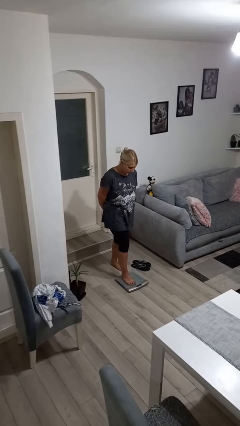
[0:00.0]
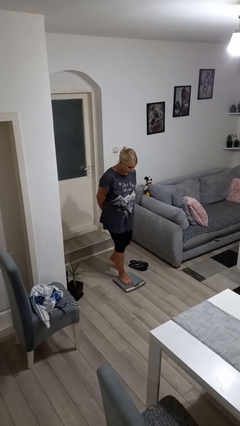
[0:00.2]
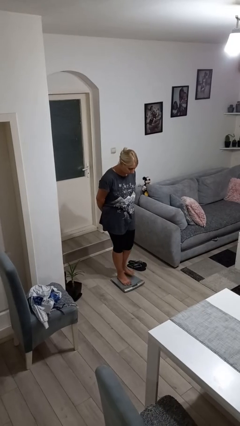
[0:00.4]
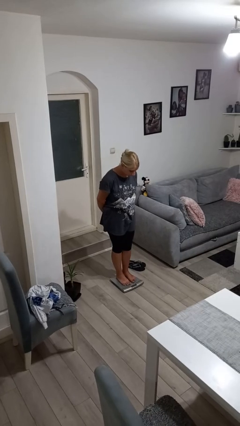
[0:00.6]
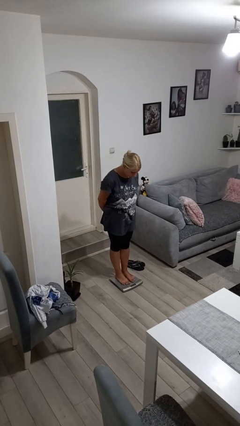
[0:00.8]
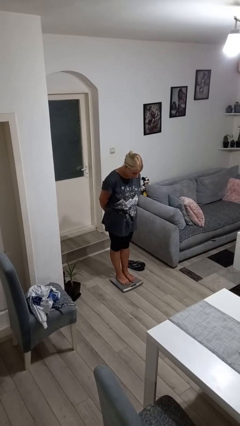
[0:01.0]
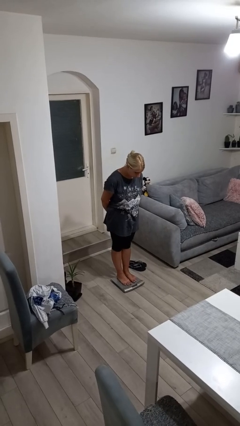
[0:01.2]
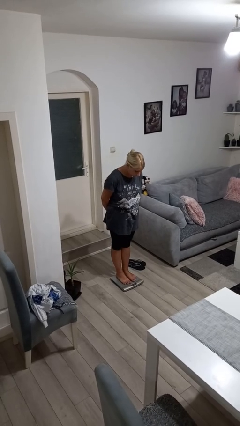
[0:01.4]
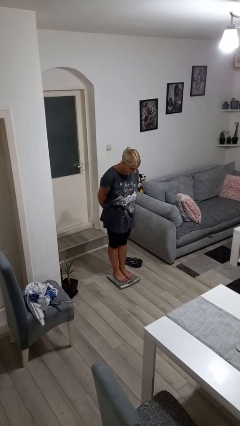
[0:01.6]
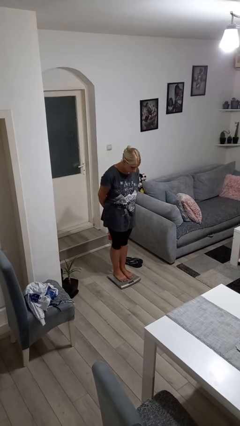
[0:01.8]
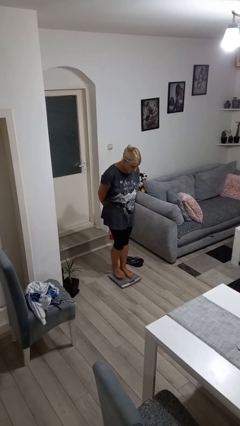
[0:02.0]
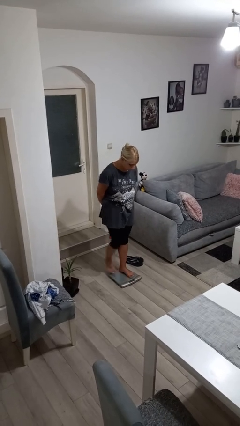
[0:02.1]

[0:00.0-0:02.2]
person uses bodyweight scale

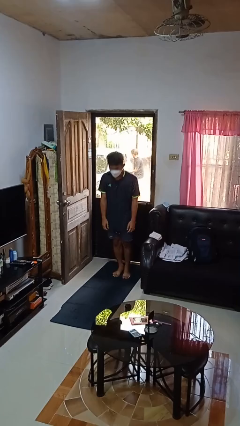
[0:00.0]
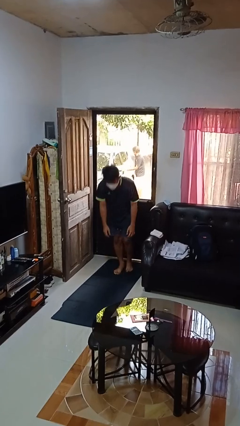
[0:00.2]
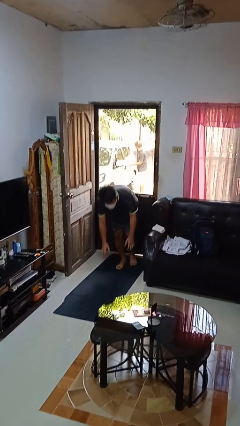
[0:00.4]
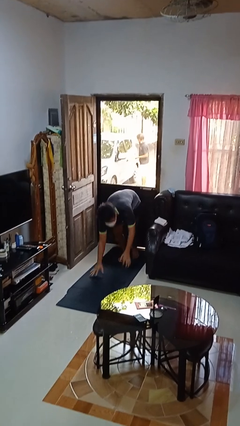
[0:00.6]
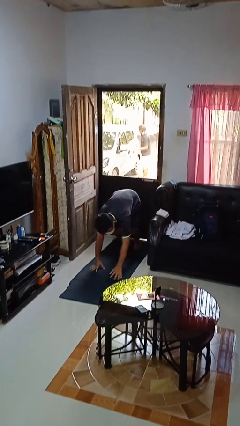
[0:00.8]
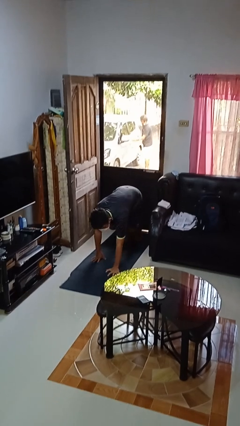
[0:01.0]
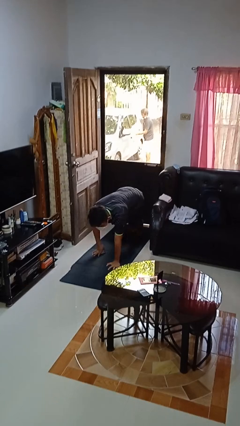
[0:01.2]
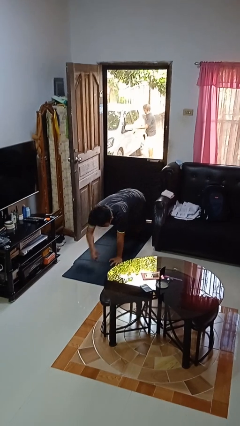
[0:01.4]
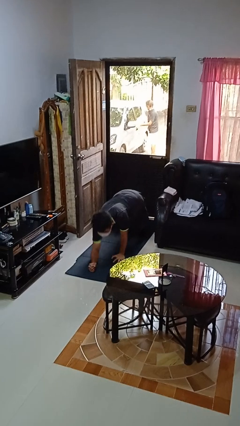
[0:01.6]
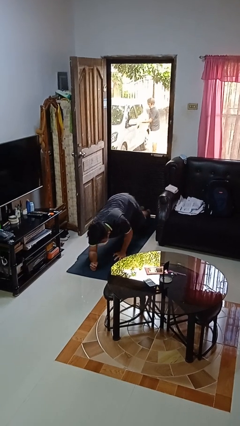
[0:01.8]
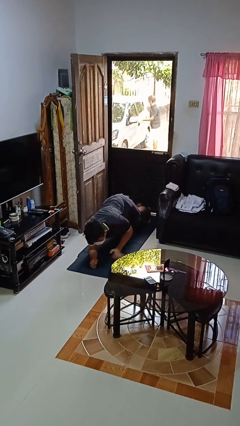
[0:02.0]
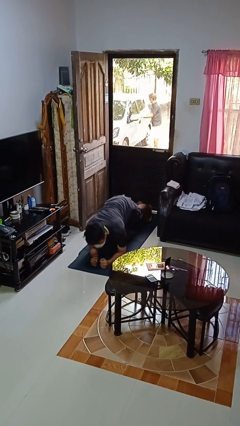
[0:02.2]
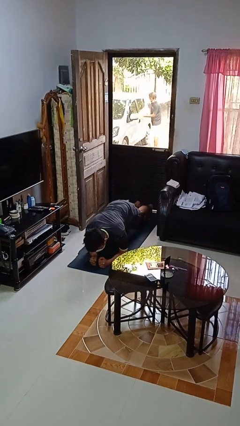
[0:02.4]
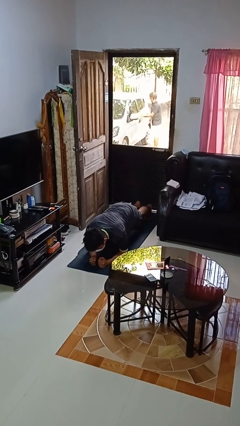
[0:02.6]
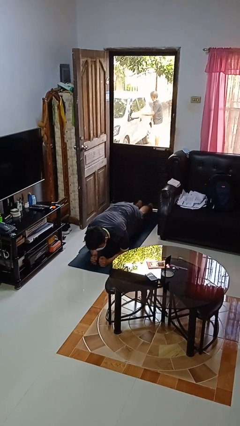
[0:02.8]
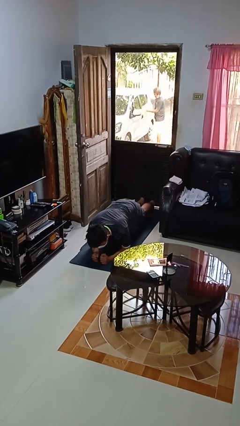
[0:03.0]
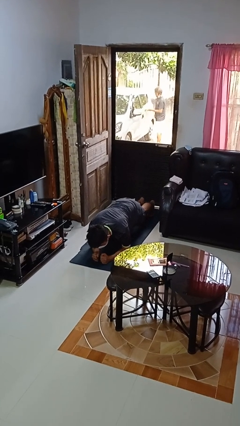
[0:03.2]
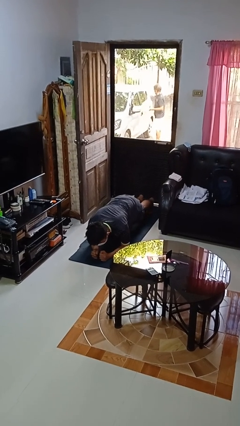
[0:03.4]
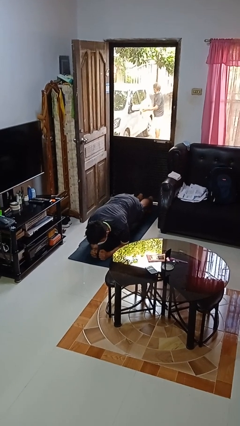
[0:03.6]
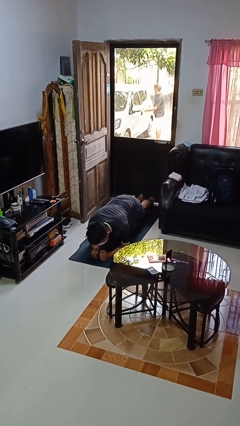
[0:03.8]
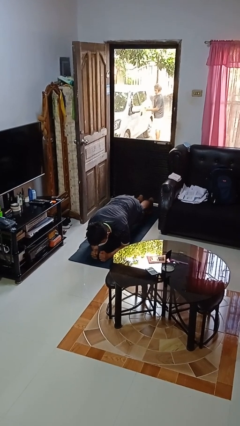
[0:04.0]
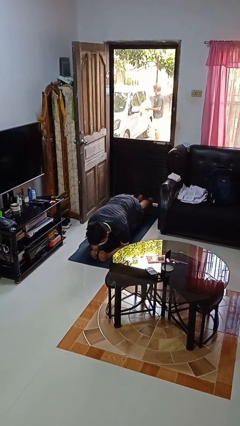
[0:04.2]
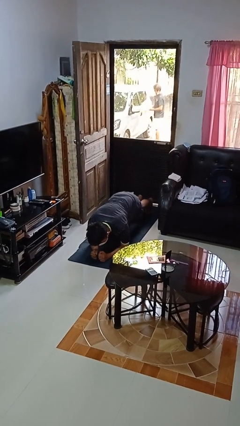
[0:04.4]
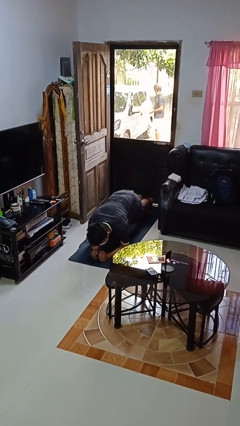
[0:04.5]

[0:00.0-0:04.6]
person exercises with plank

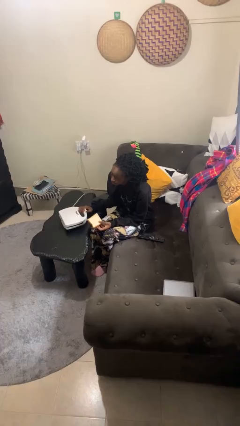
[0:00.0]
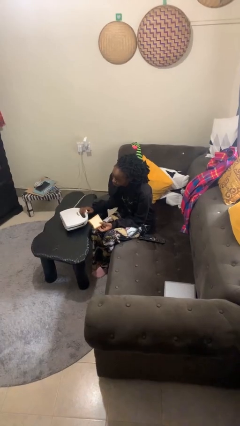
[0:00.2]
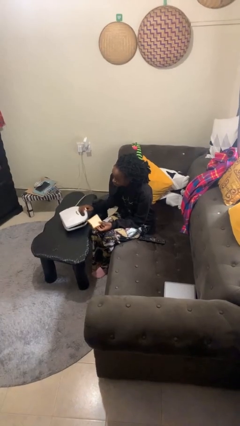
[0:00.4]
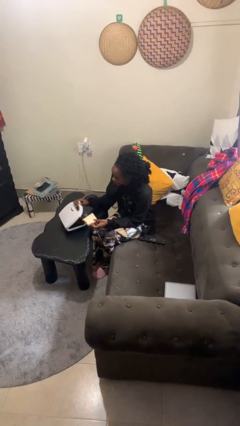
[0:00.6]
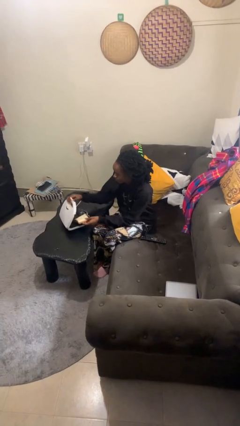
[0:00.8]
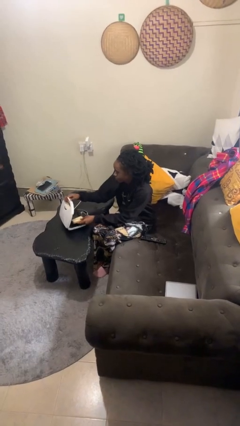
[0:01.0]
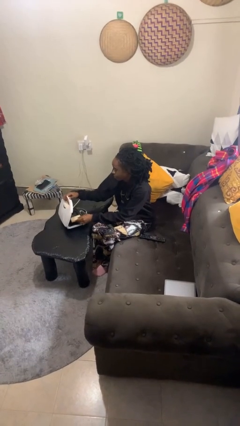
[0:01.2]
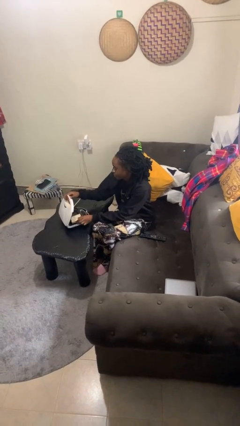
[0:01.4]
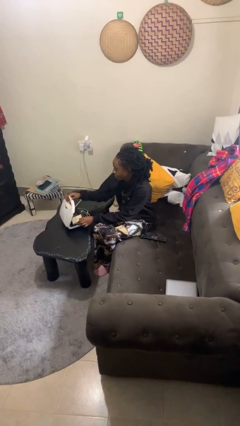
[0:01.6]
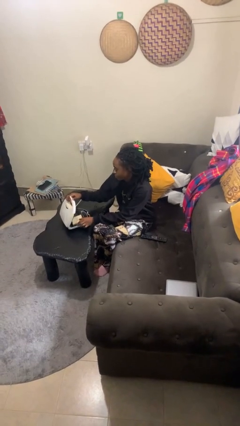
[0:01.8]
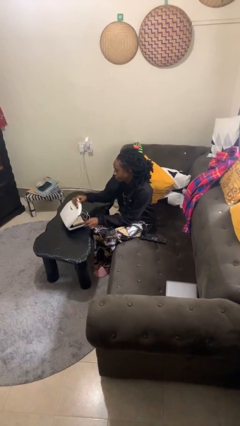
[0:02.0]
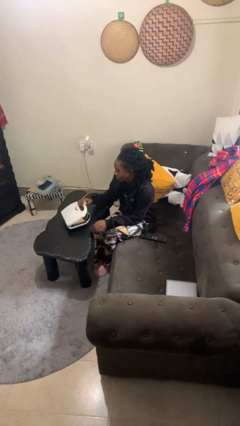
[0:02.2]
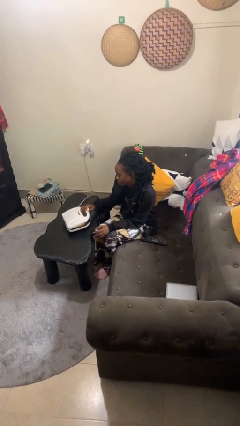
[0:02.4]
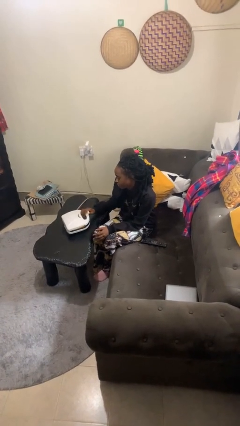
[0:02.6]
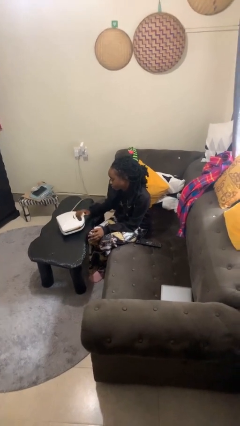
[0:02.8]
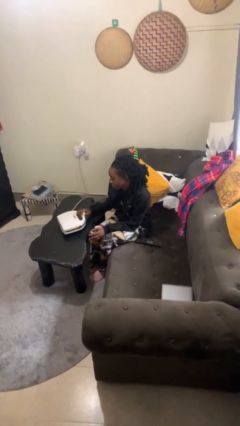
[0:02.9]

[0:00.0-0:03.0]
person puts object into toaster

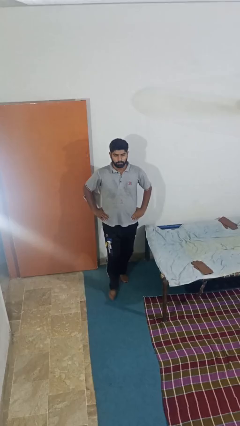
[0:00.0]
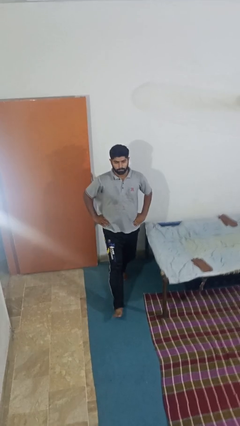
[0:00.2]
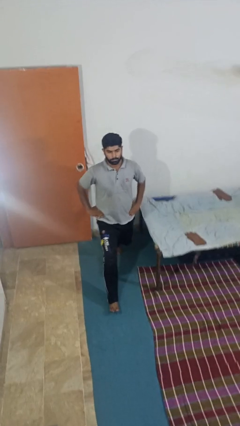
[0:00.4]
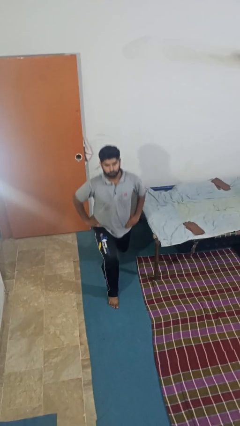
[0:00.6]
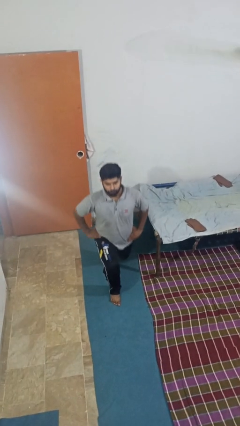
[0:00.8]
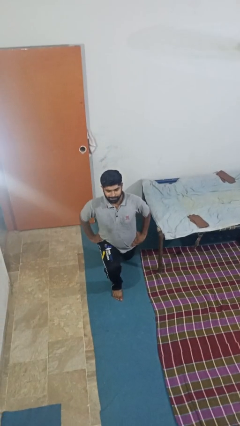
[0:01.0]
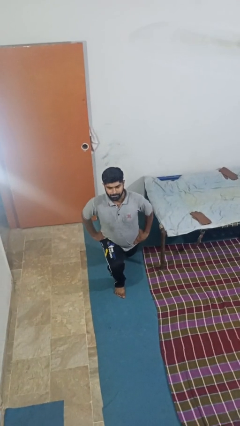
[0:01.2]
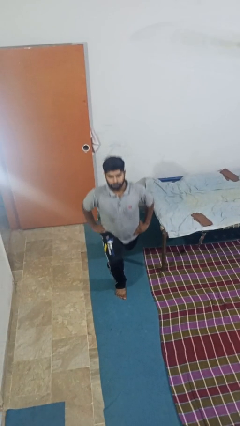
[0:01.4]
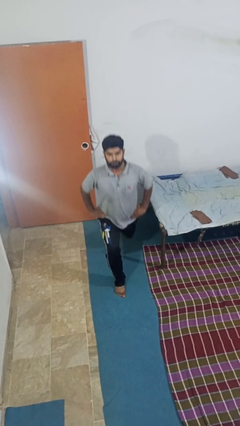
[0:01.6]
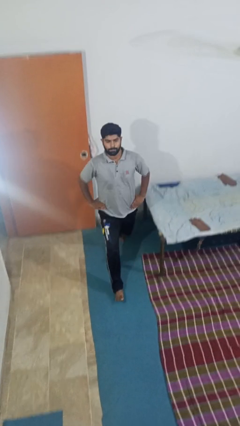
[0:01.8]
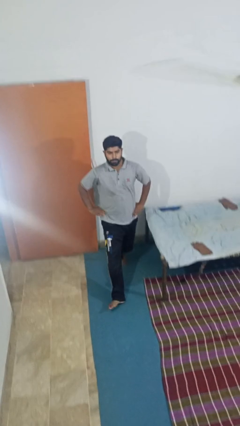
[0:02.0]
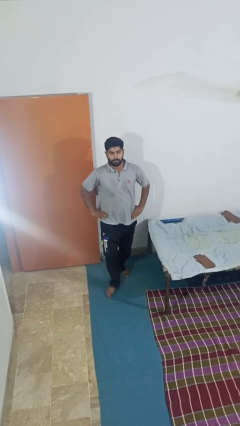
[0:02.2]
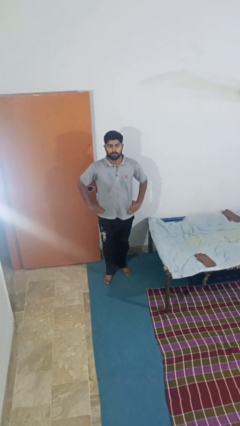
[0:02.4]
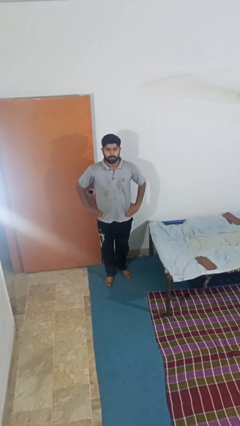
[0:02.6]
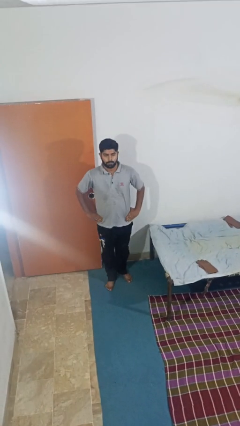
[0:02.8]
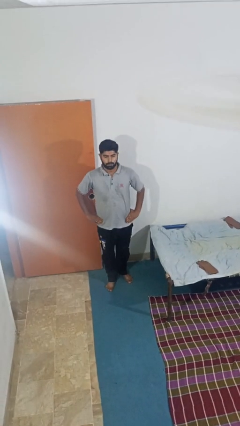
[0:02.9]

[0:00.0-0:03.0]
person exercises with lunges

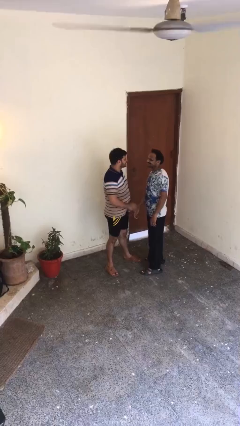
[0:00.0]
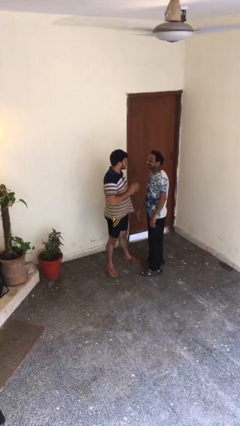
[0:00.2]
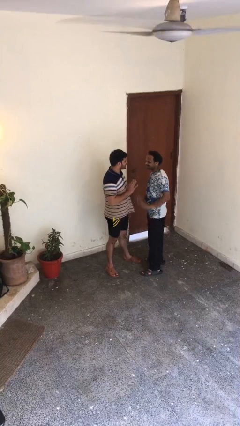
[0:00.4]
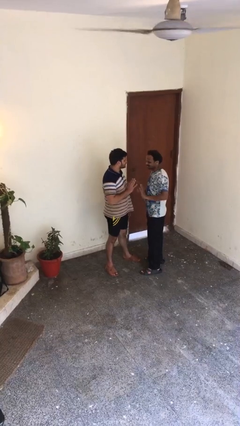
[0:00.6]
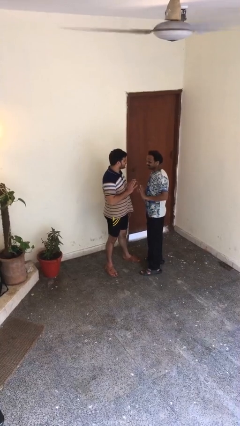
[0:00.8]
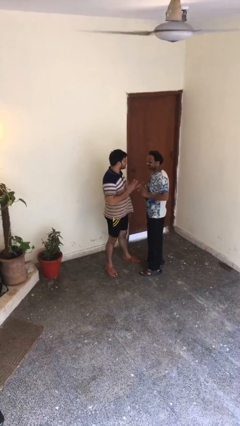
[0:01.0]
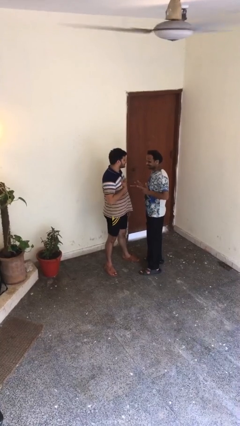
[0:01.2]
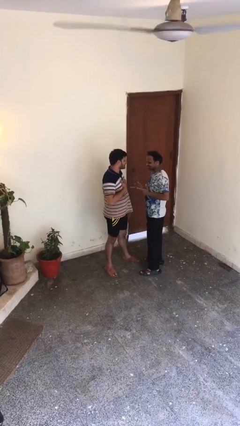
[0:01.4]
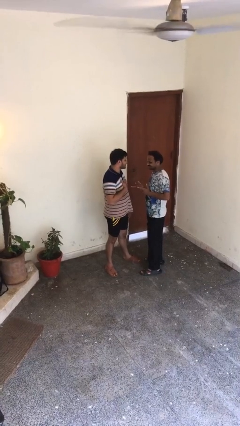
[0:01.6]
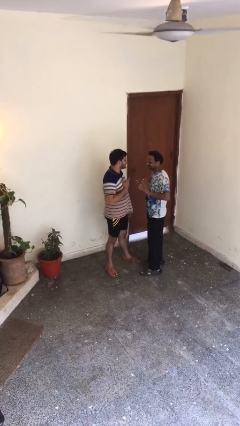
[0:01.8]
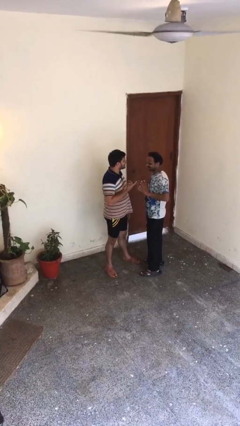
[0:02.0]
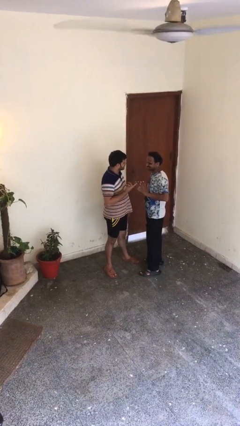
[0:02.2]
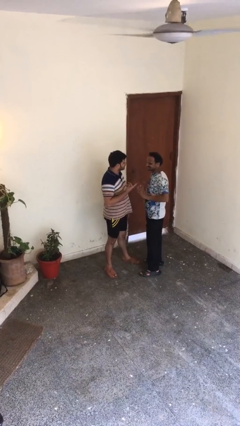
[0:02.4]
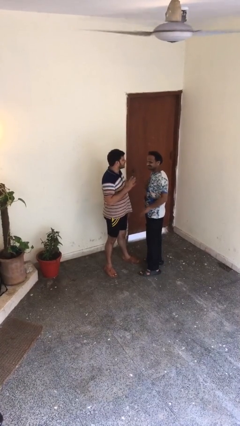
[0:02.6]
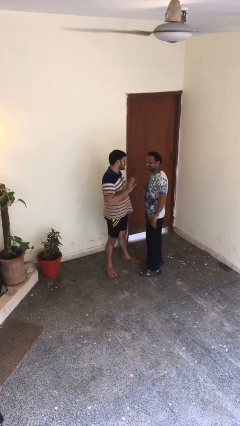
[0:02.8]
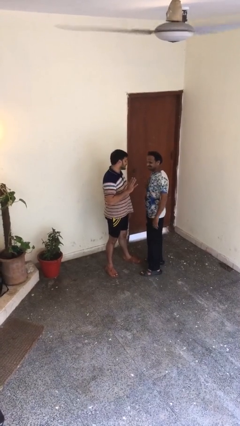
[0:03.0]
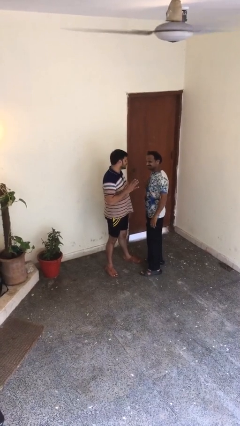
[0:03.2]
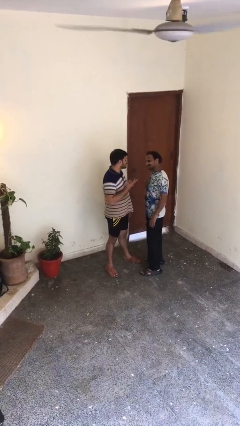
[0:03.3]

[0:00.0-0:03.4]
person talks to person

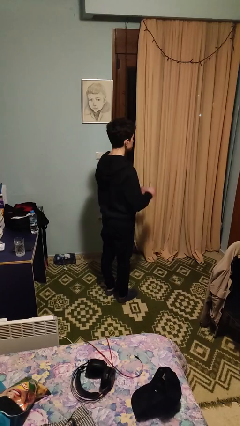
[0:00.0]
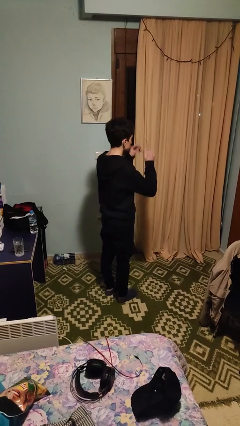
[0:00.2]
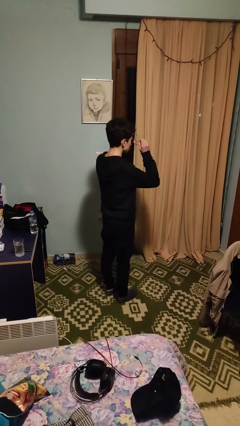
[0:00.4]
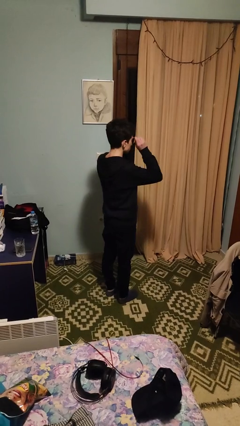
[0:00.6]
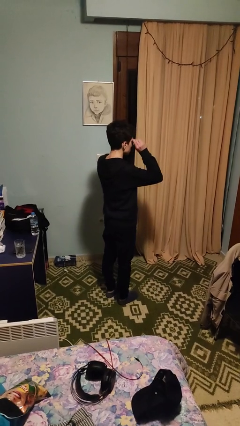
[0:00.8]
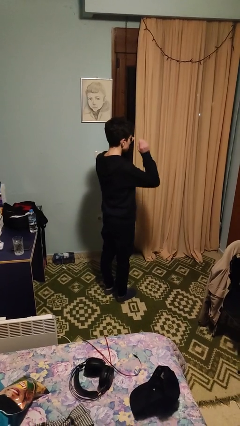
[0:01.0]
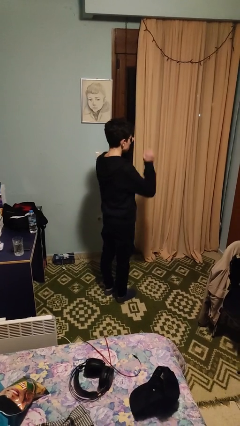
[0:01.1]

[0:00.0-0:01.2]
person puts on glasses
